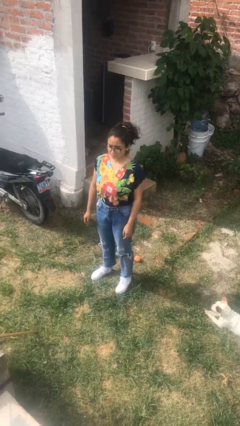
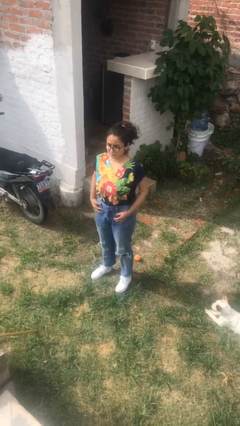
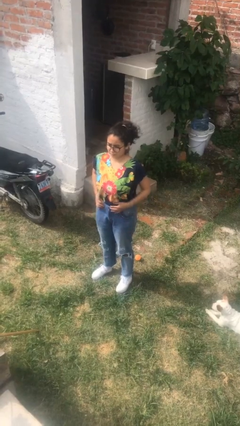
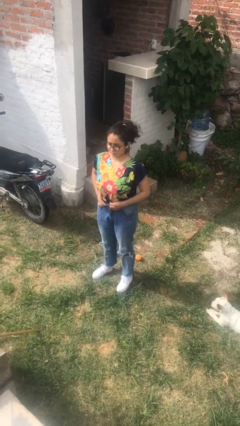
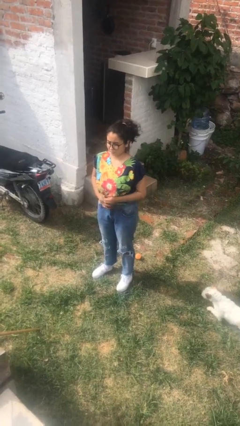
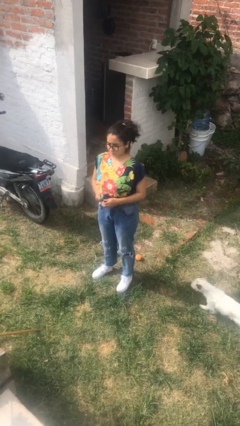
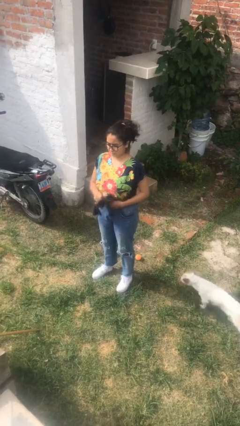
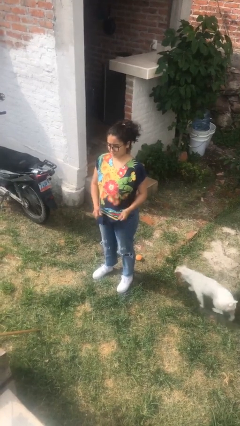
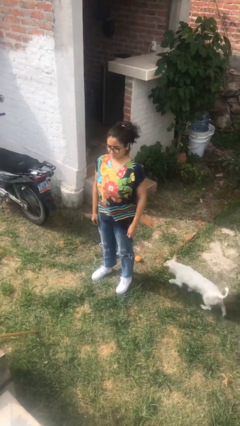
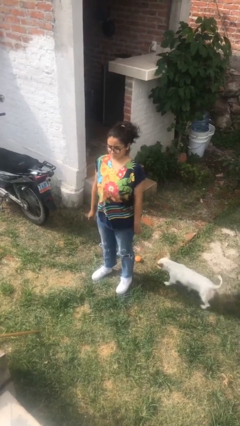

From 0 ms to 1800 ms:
person untucks shirt

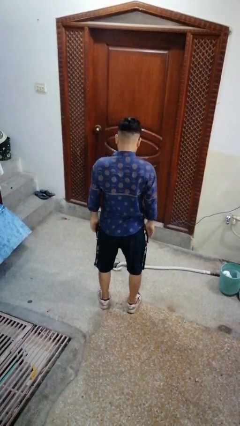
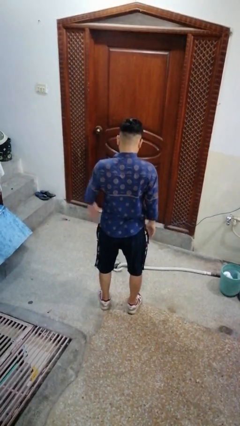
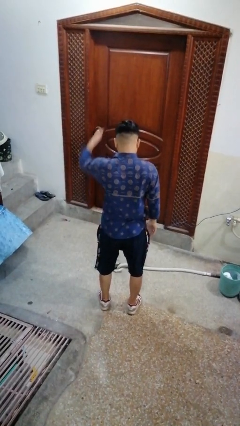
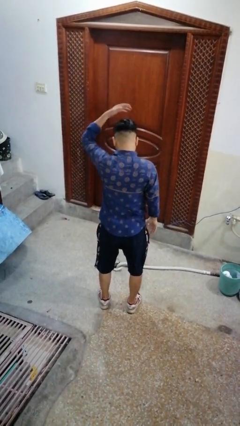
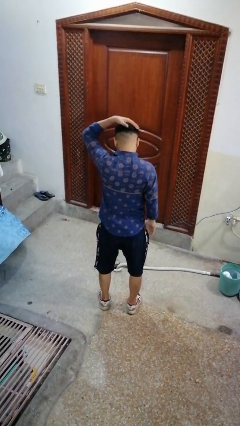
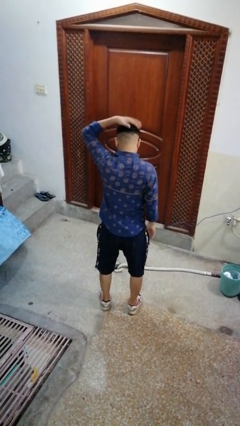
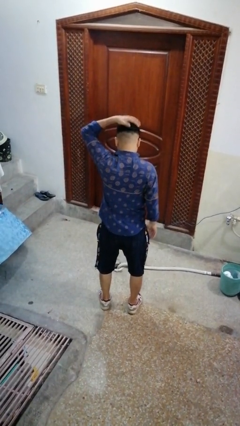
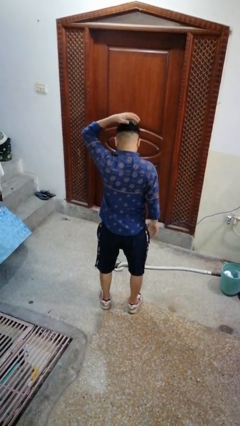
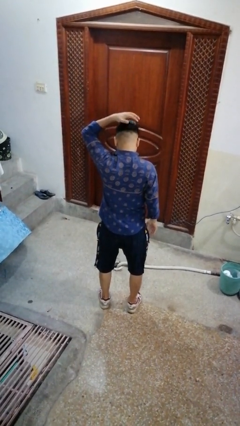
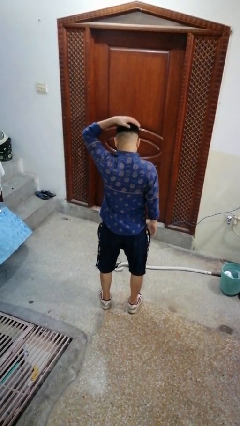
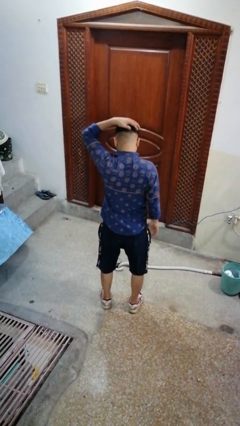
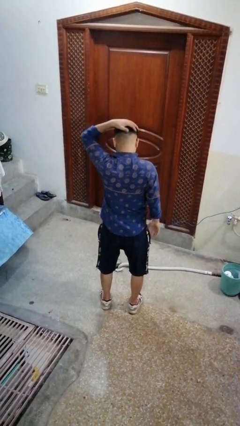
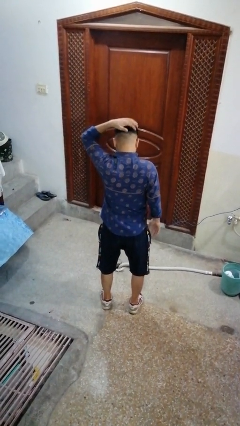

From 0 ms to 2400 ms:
person pats head

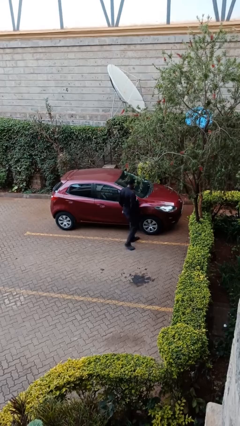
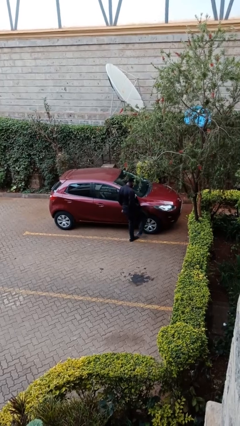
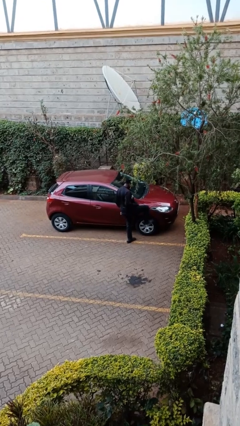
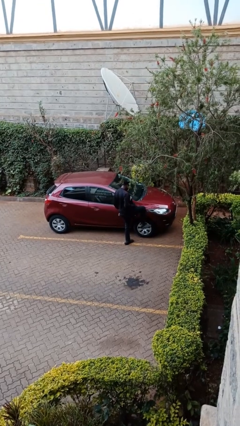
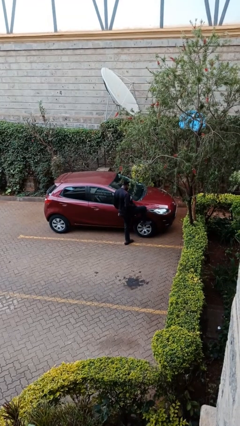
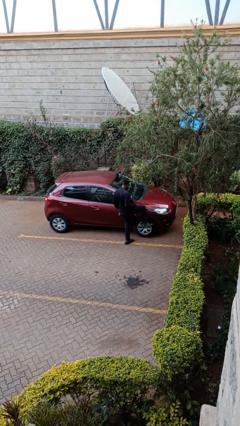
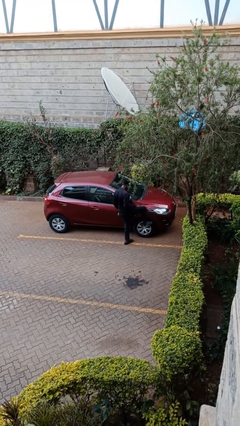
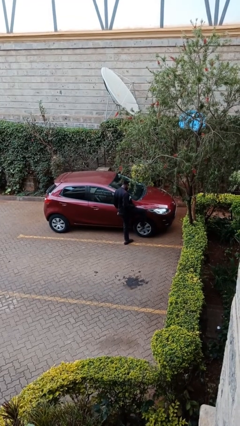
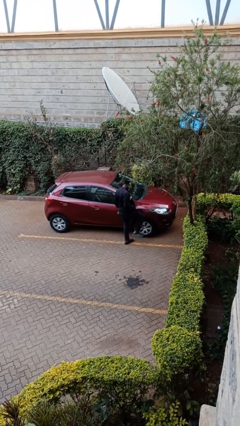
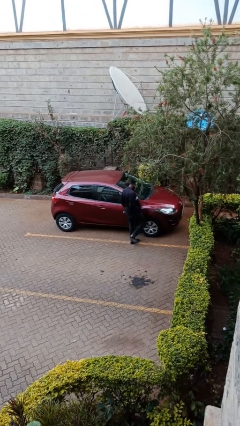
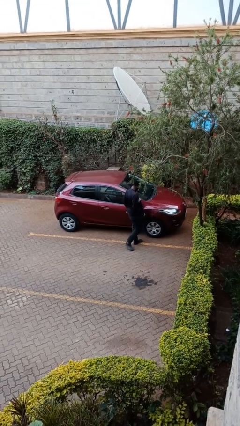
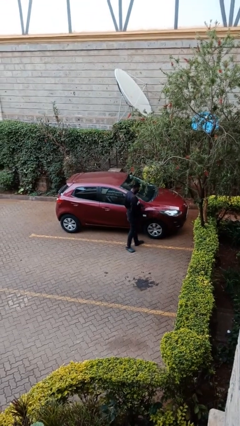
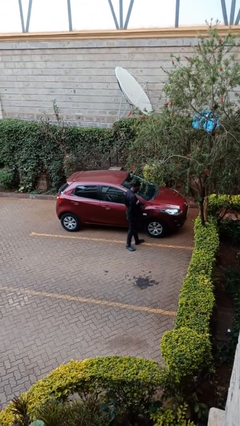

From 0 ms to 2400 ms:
person kicks car tires

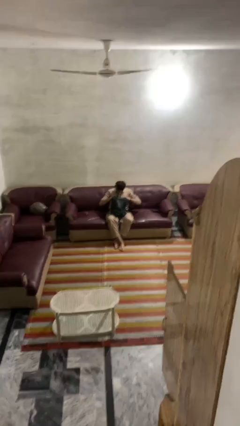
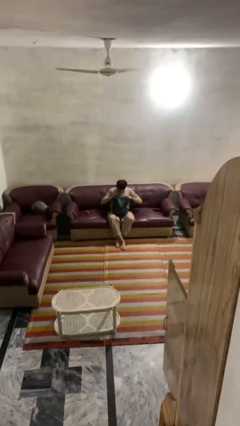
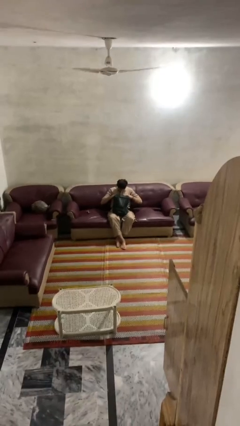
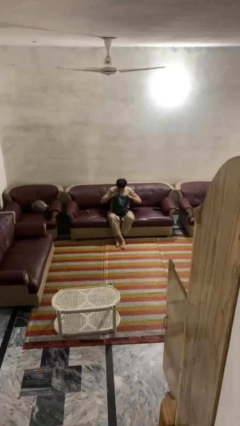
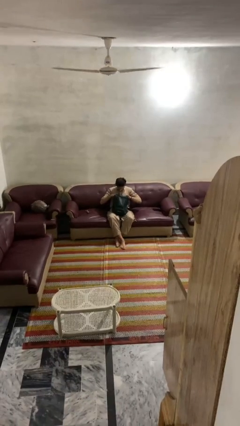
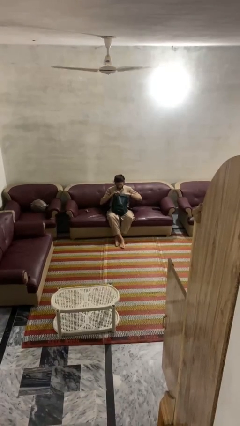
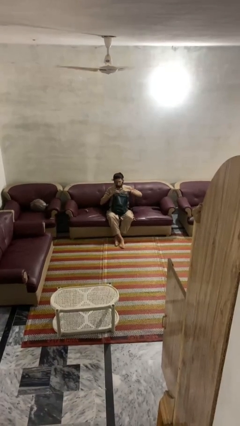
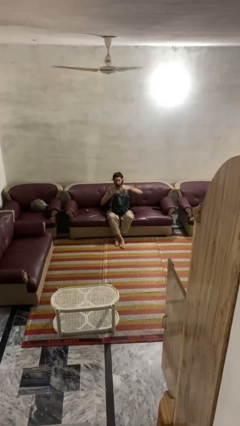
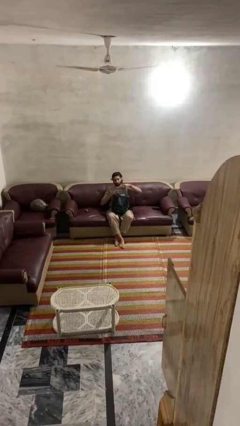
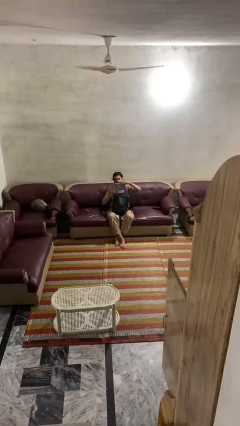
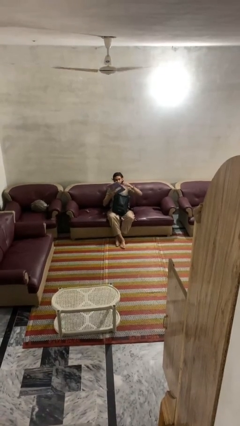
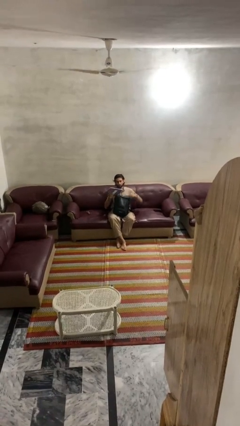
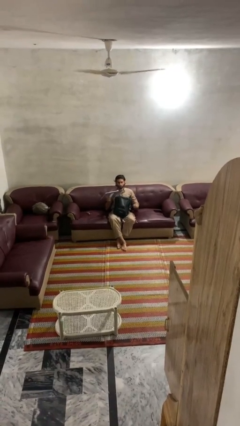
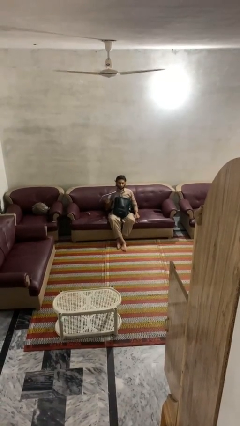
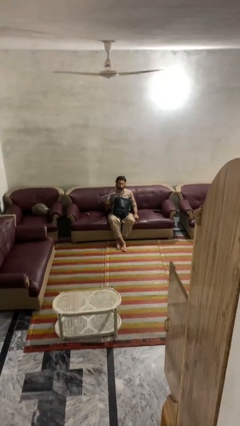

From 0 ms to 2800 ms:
person takes object from backpack

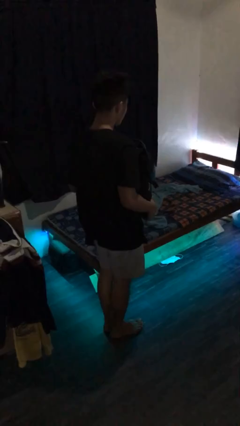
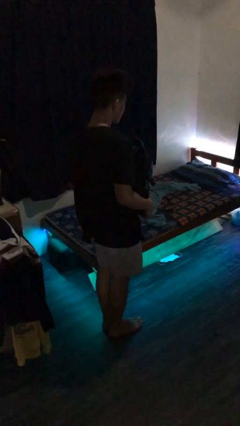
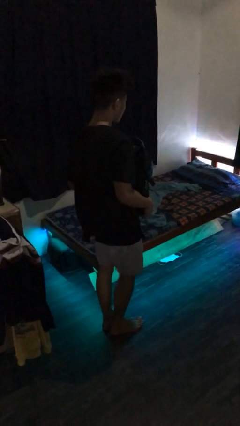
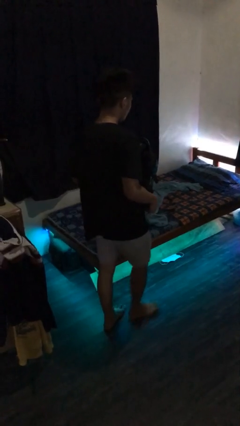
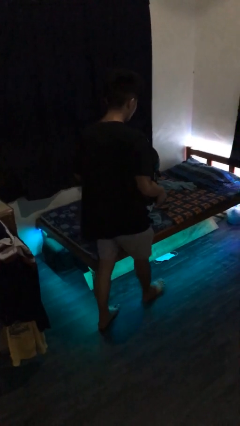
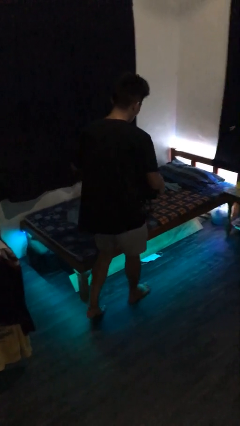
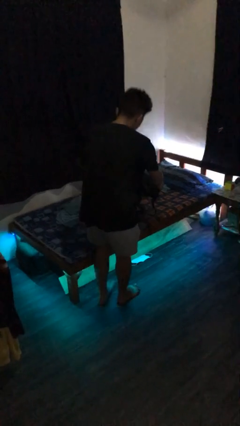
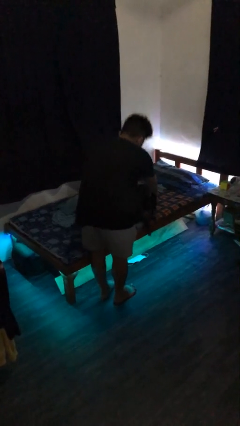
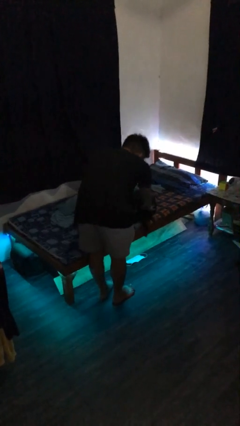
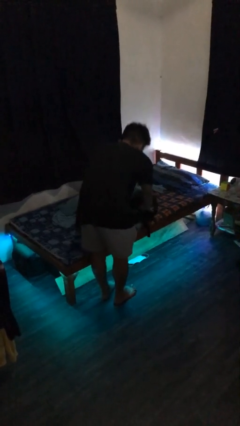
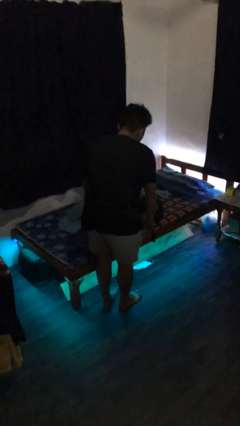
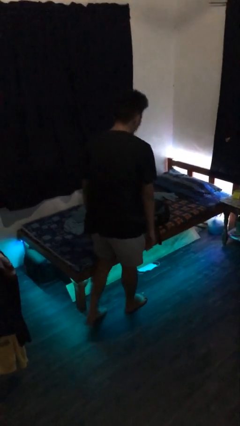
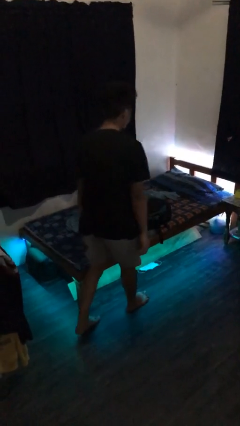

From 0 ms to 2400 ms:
person puts down object on bed

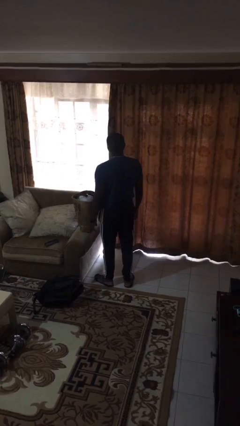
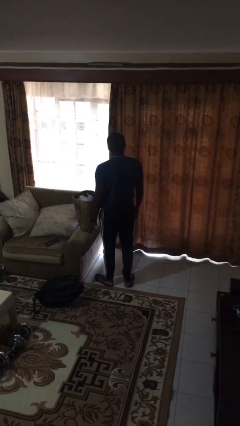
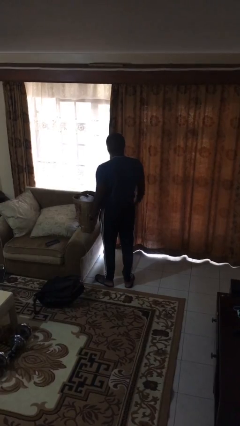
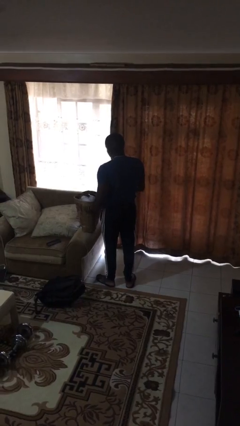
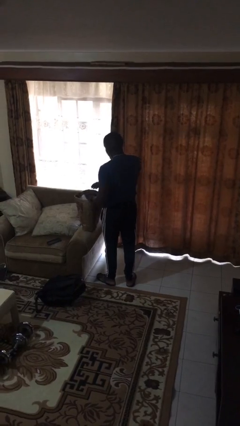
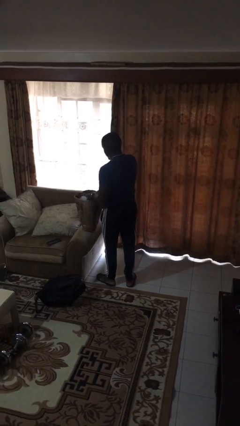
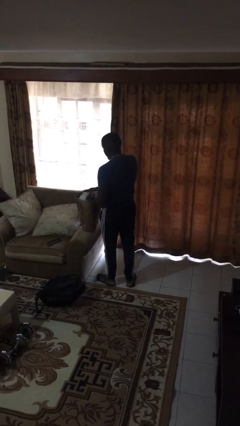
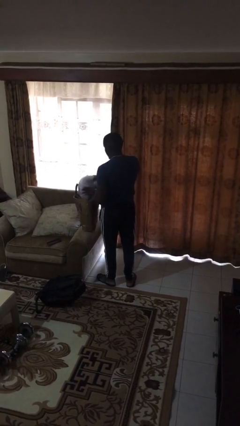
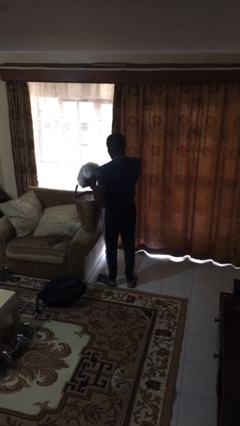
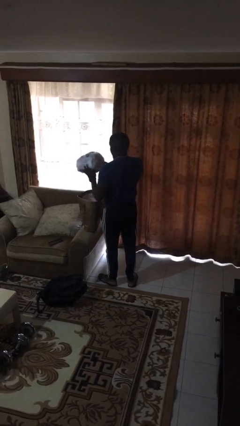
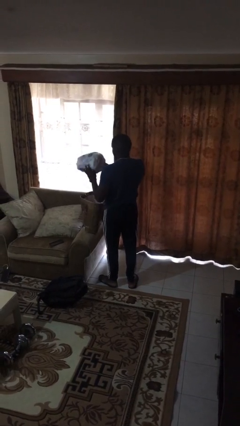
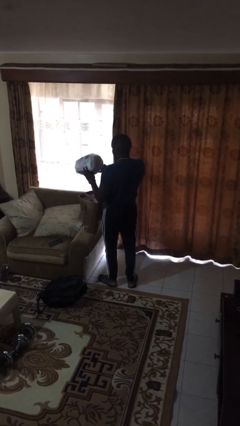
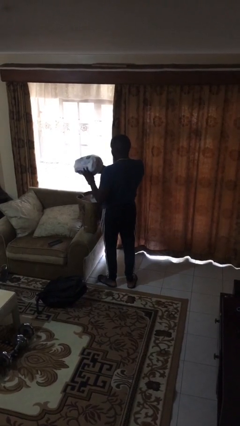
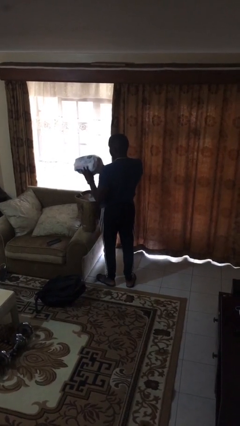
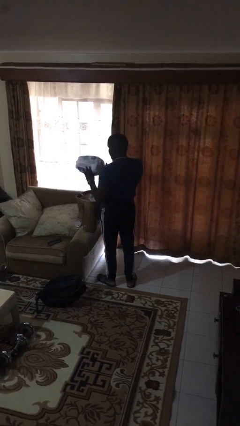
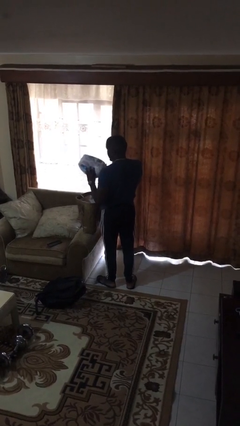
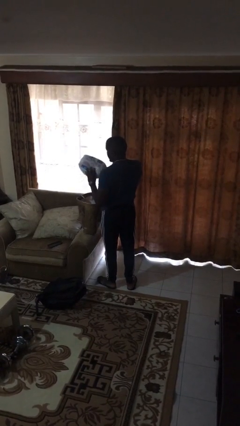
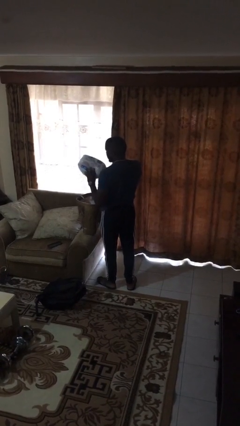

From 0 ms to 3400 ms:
person takes object from bag

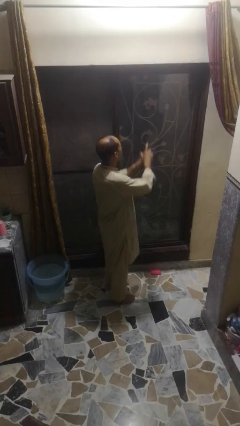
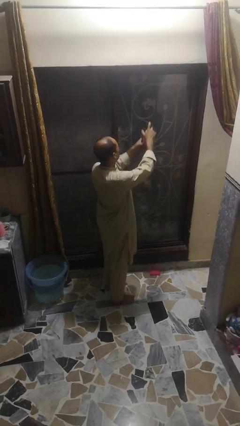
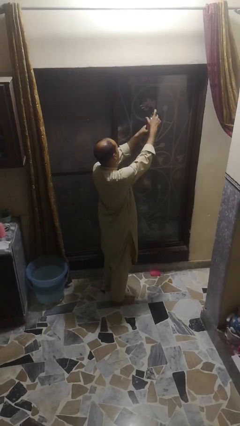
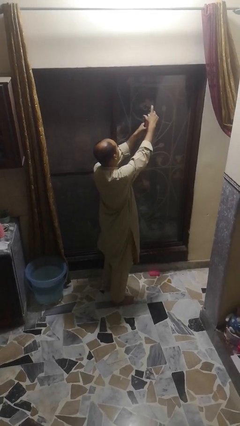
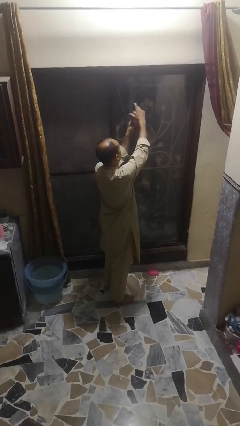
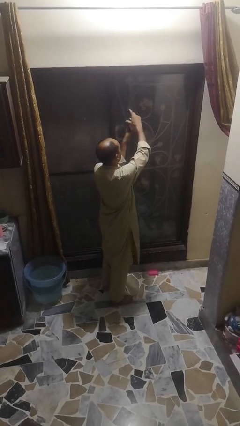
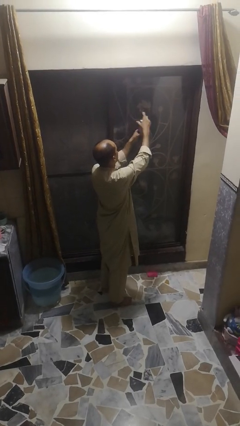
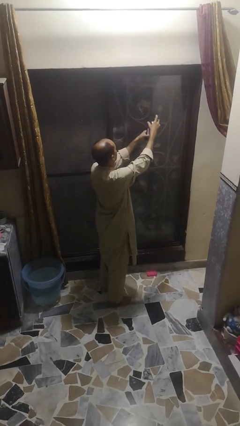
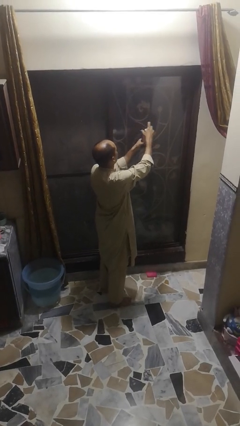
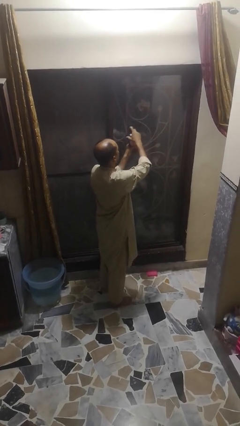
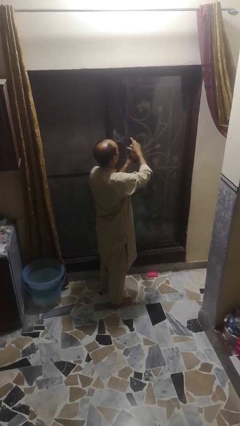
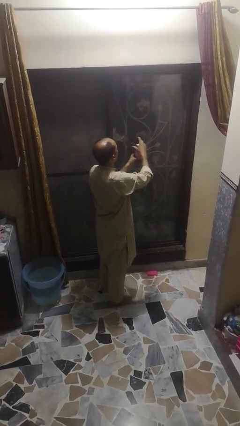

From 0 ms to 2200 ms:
person sprays from bottle
